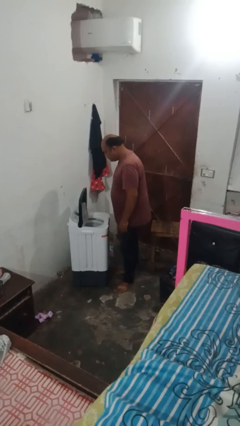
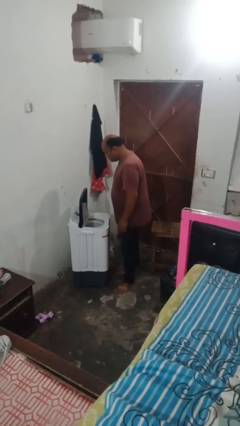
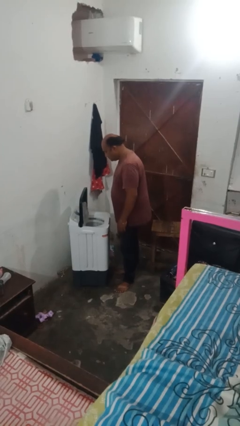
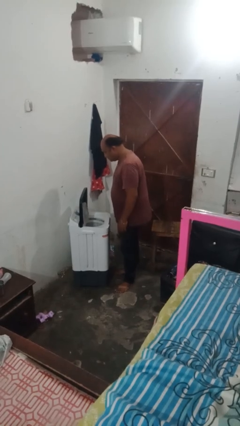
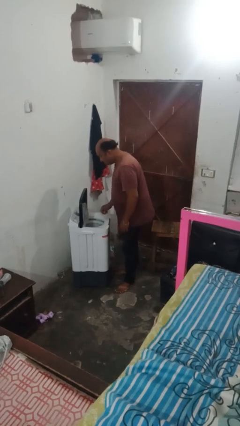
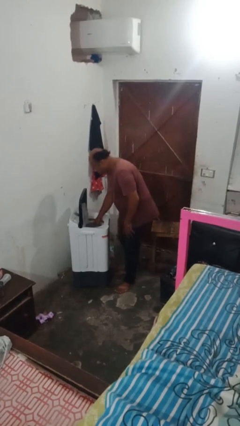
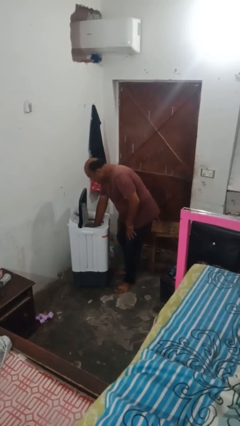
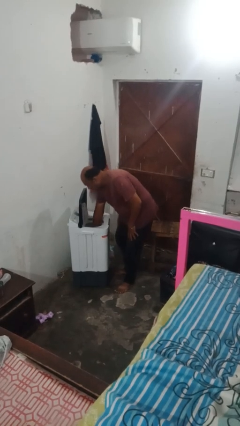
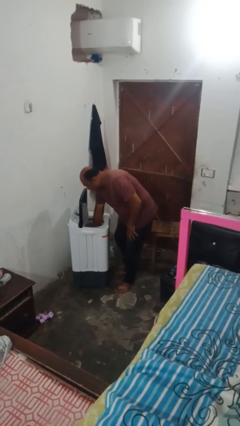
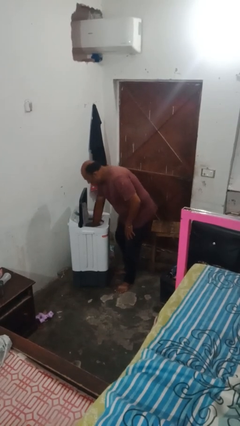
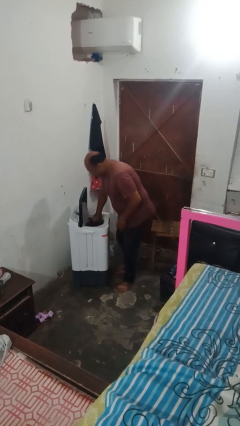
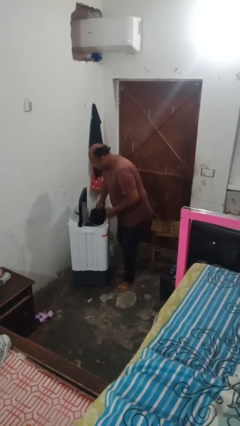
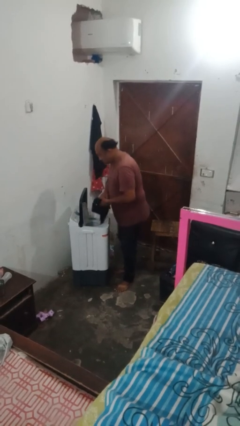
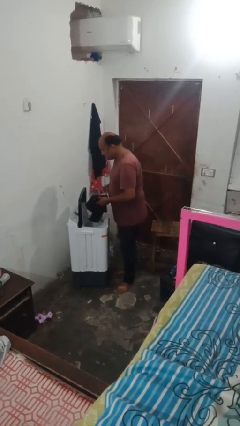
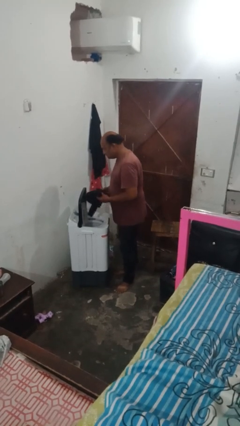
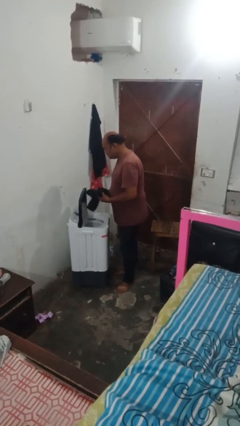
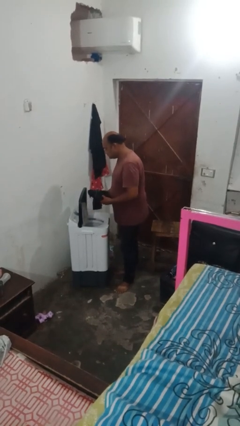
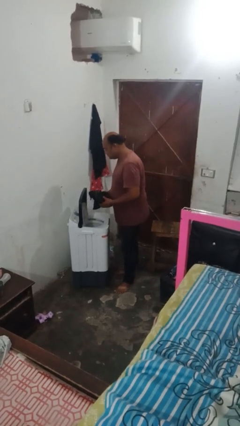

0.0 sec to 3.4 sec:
person unloads clotheswasher

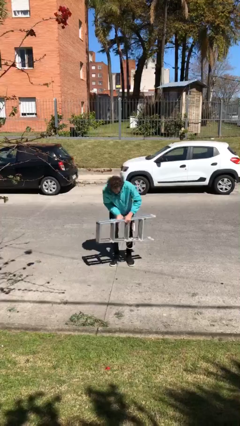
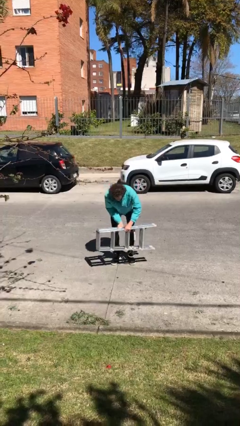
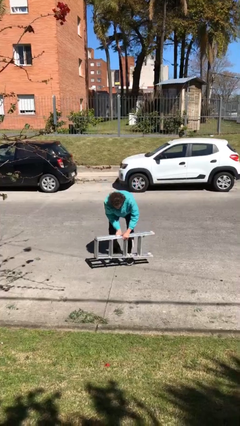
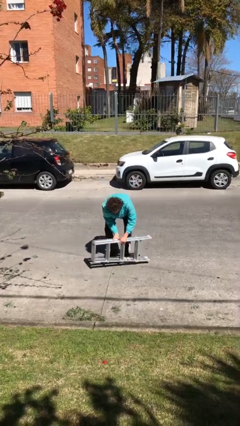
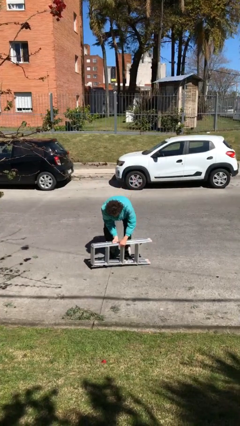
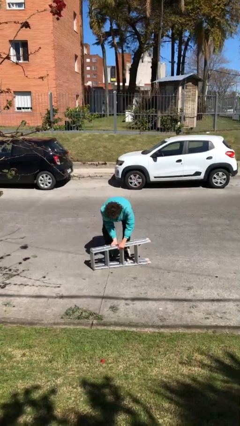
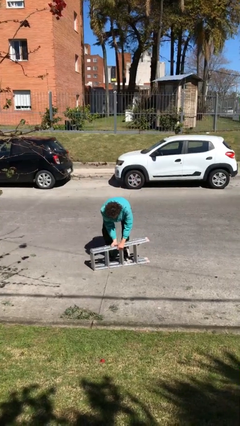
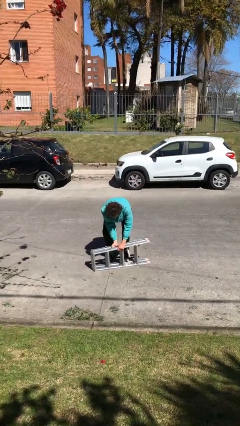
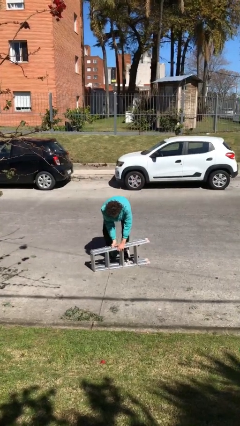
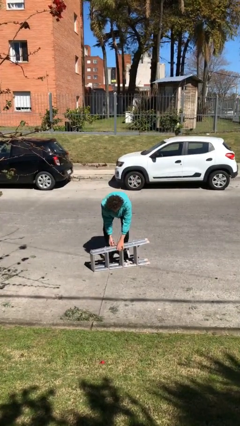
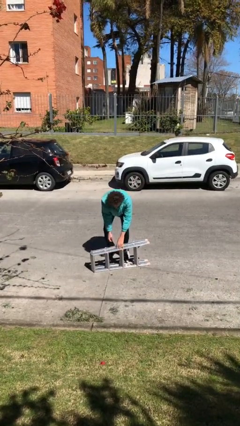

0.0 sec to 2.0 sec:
person puts down object on floor

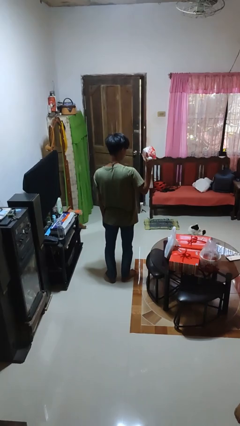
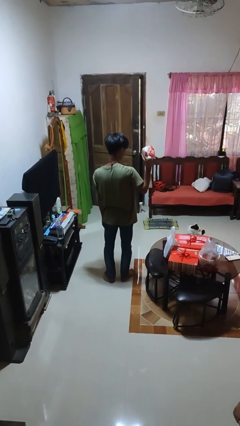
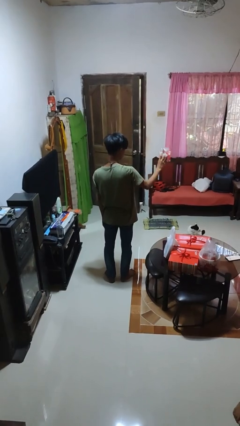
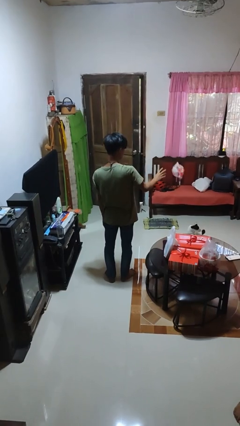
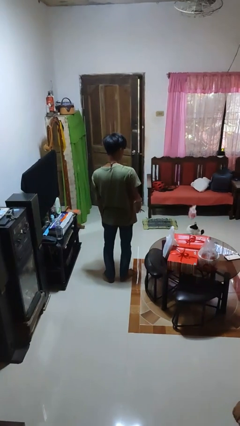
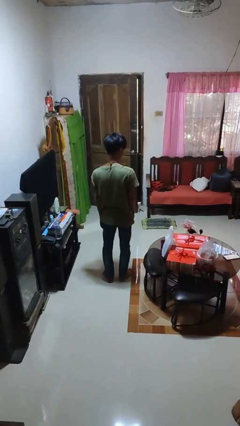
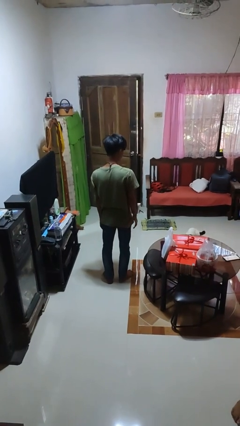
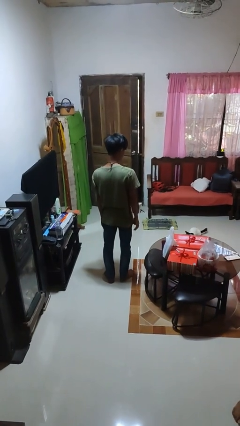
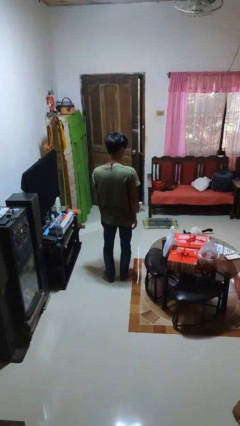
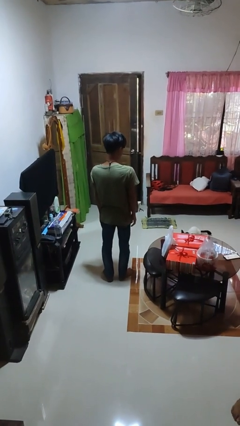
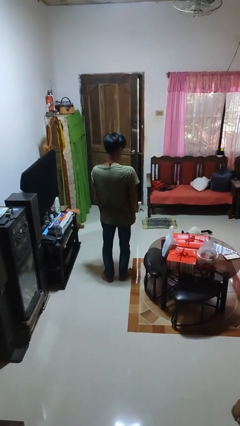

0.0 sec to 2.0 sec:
person throws object to ground

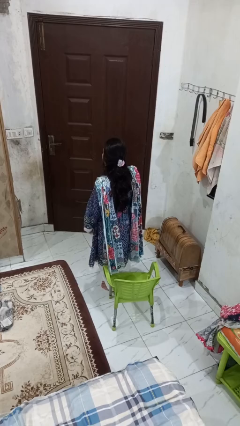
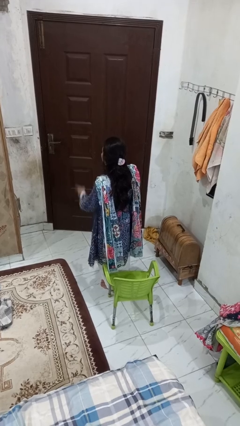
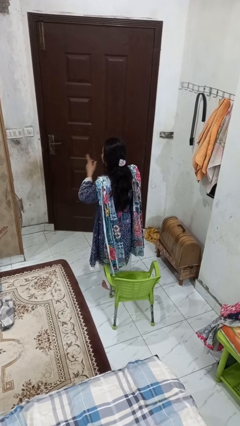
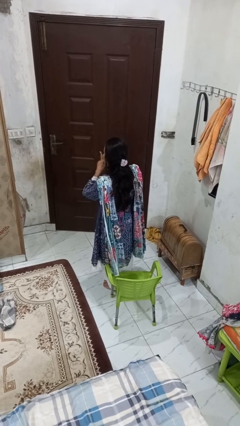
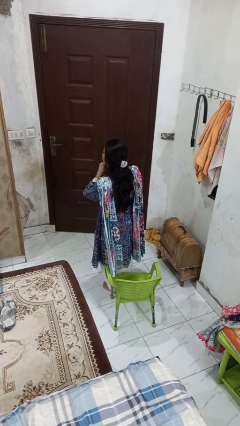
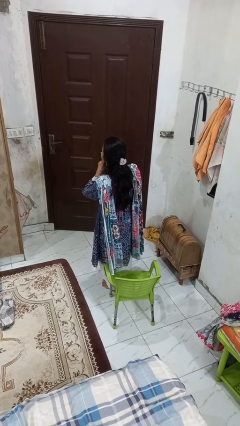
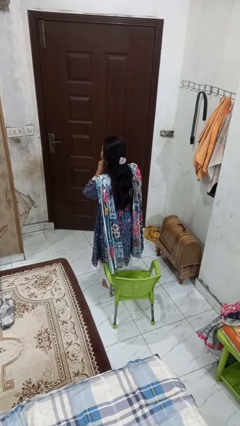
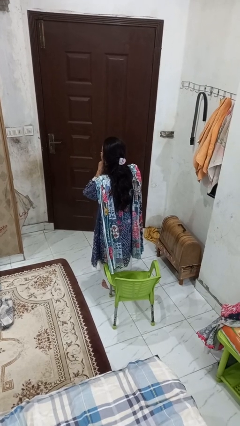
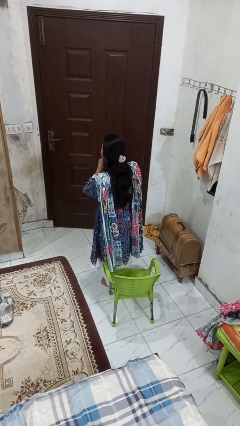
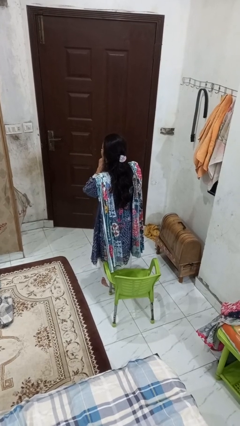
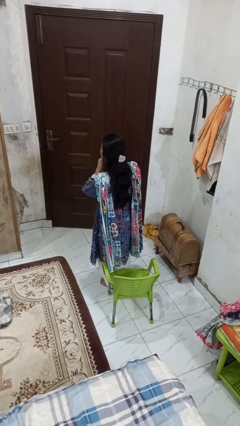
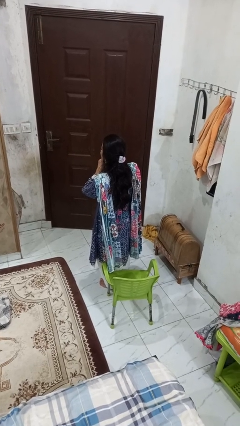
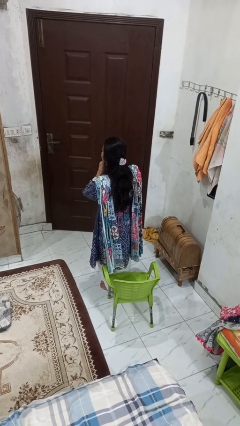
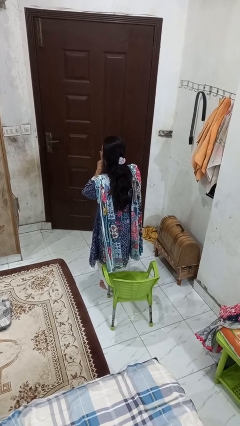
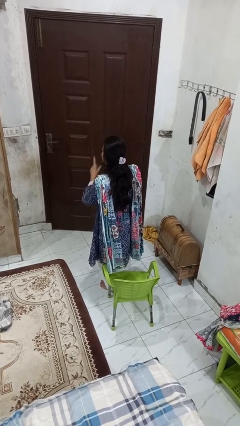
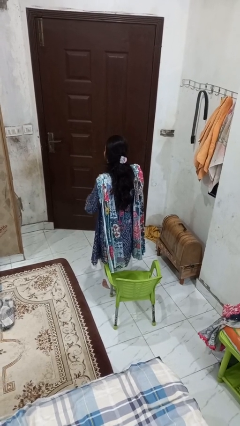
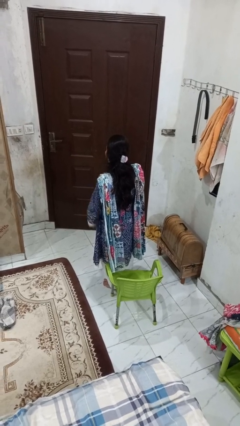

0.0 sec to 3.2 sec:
person gestures be quiet

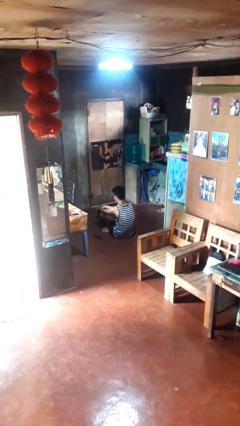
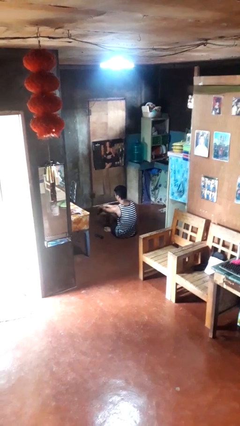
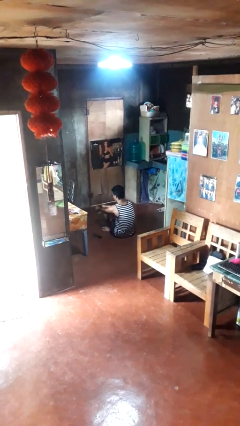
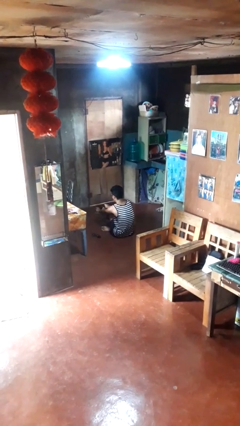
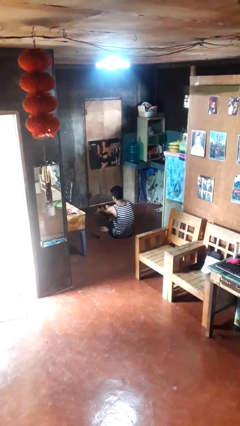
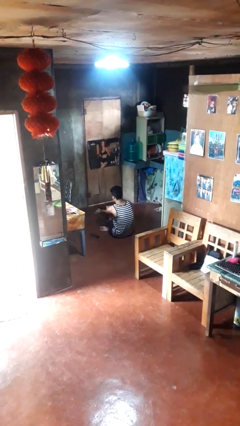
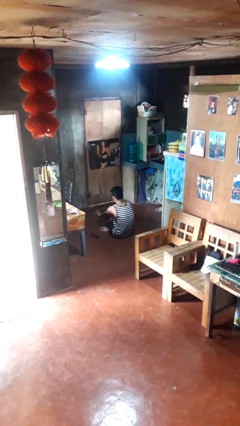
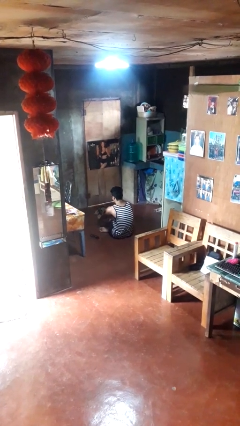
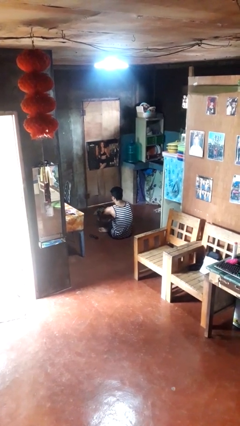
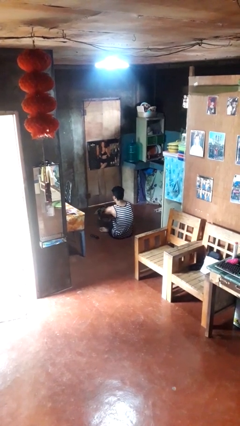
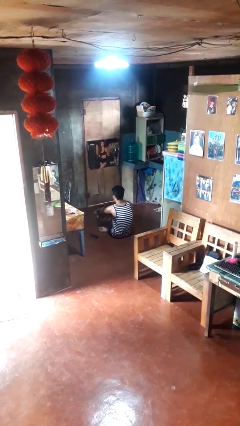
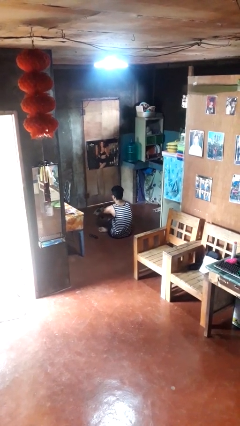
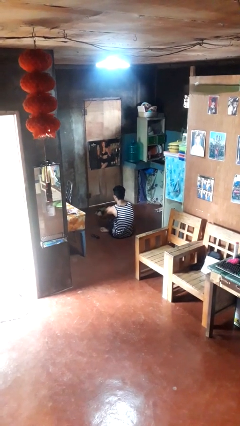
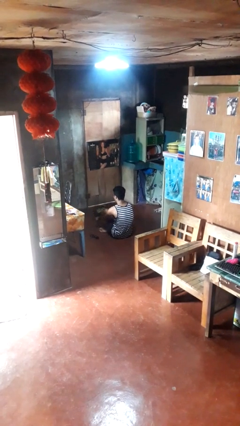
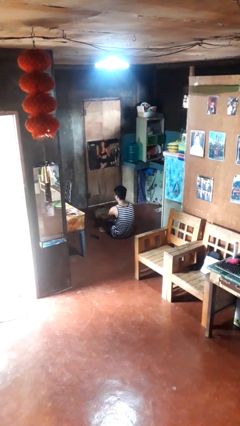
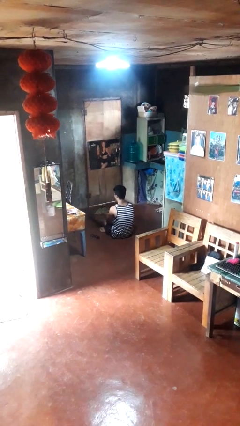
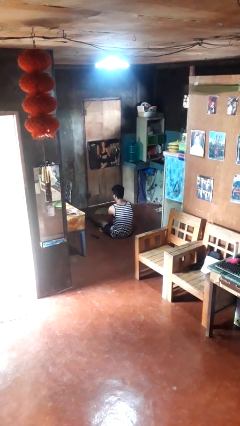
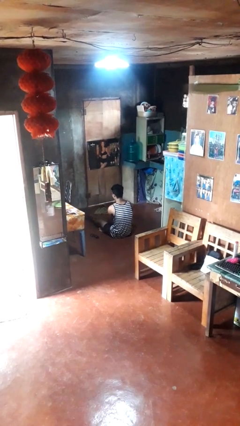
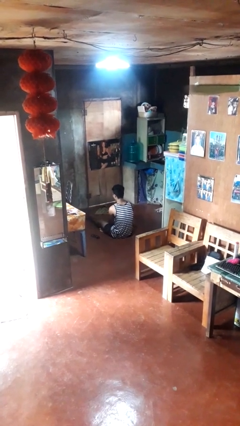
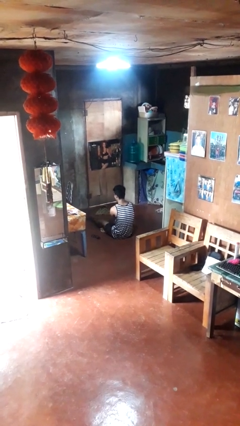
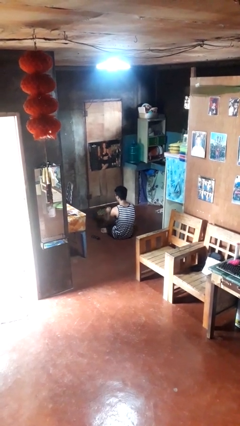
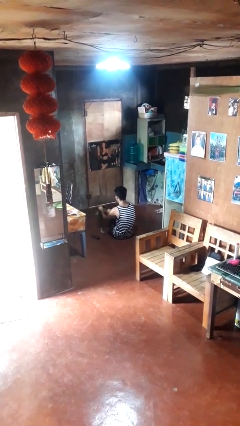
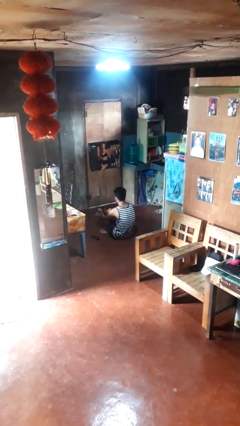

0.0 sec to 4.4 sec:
person puts on socks

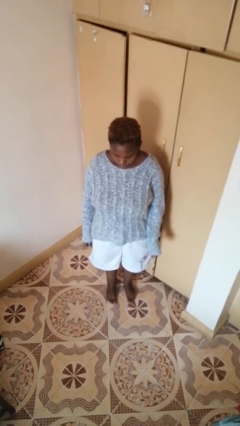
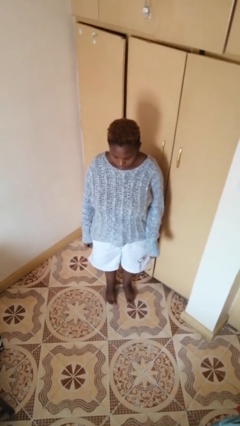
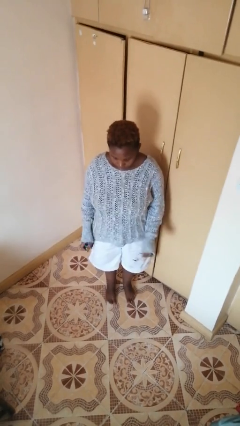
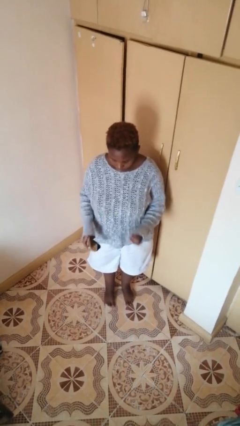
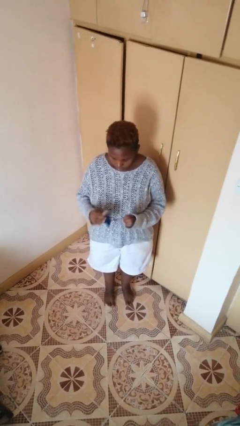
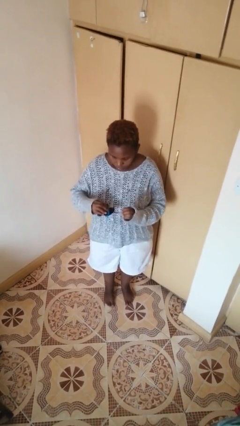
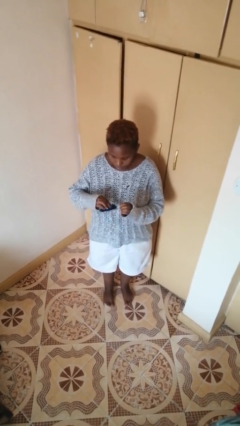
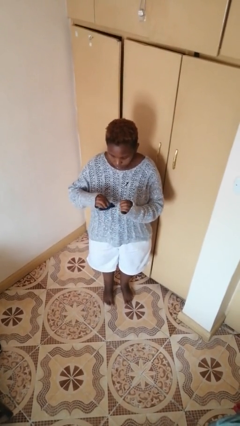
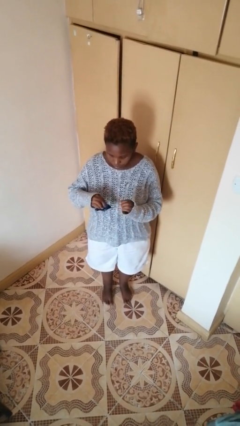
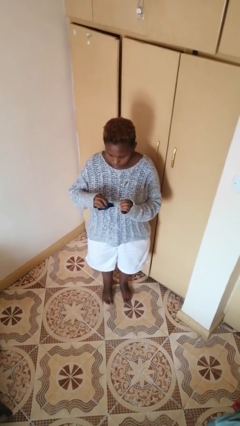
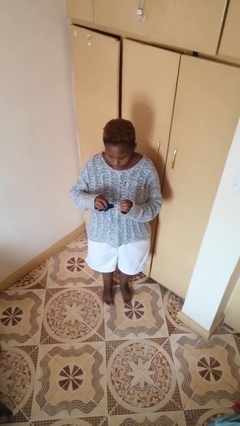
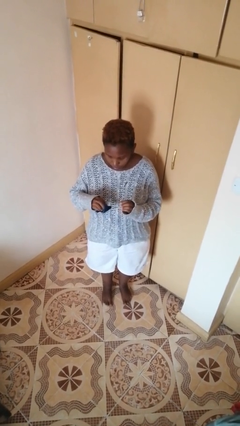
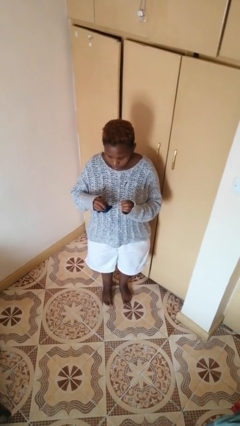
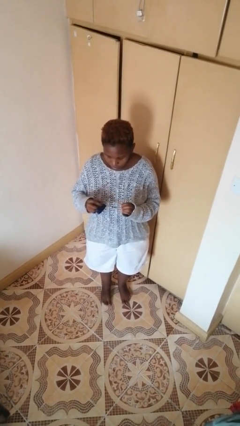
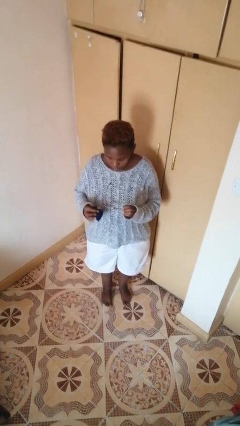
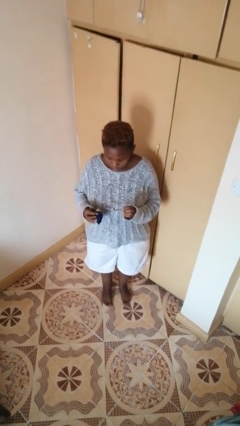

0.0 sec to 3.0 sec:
person cleans eyeglasses
